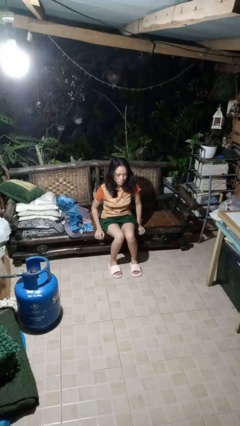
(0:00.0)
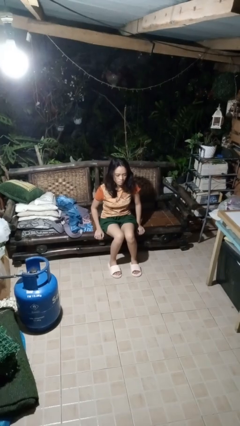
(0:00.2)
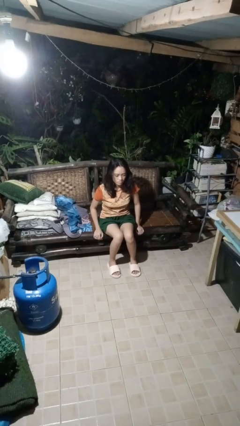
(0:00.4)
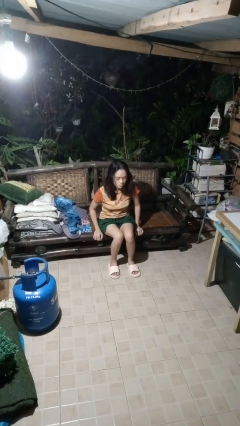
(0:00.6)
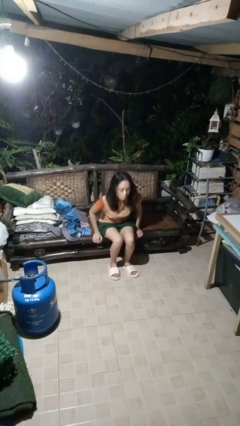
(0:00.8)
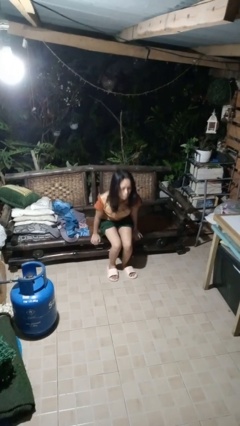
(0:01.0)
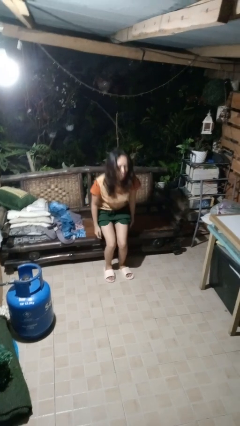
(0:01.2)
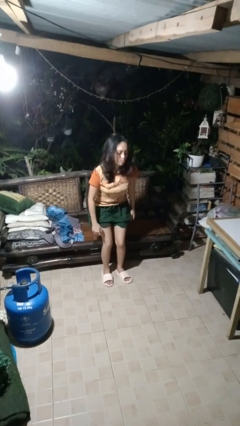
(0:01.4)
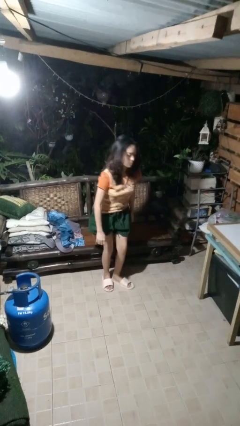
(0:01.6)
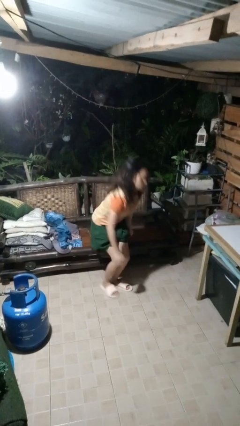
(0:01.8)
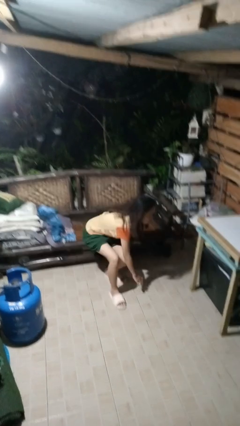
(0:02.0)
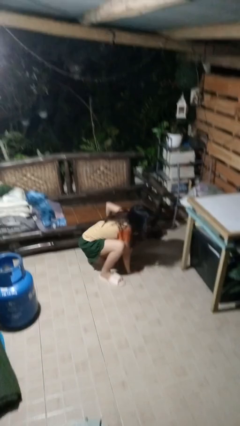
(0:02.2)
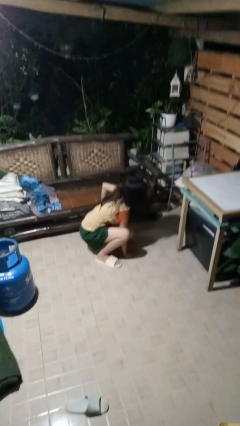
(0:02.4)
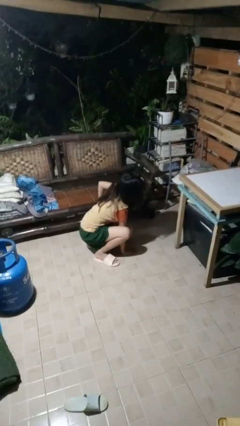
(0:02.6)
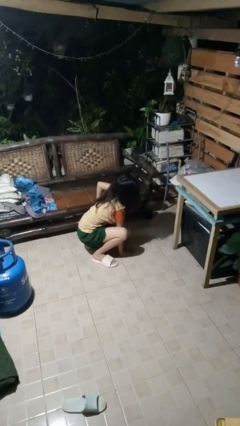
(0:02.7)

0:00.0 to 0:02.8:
person falls from chair

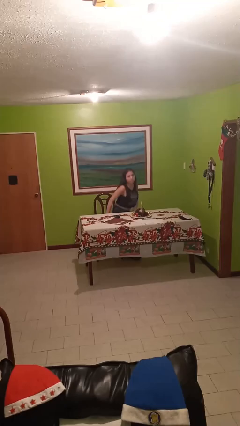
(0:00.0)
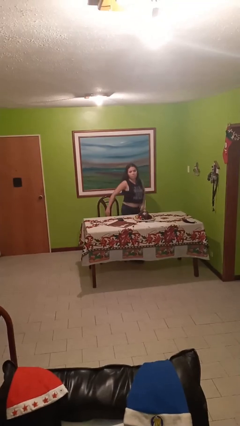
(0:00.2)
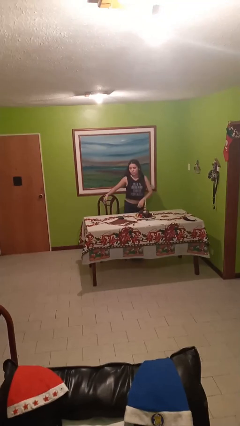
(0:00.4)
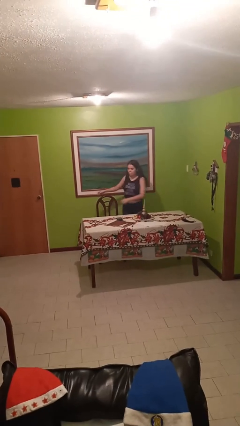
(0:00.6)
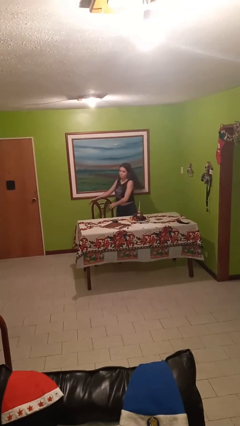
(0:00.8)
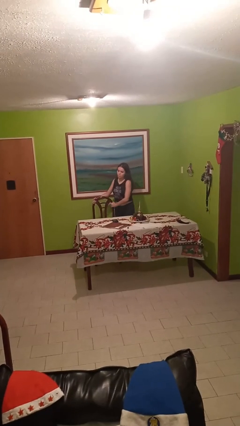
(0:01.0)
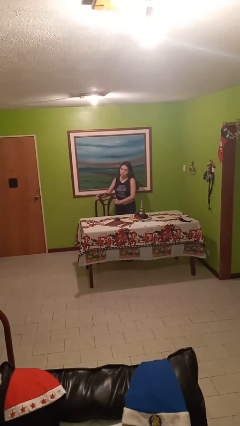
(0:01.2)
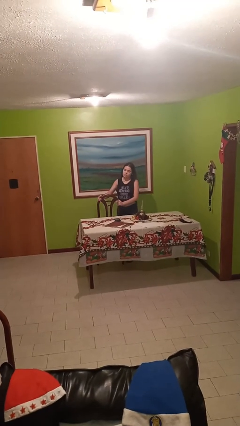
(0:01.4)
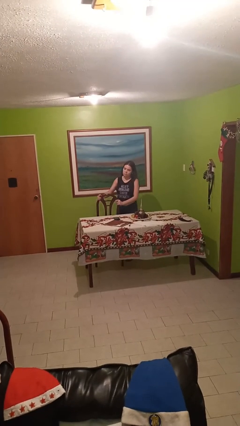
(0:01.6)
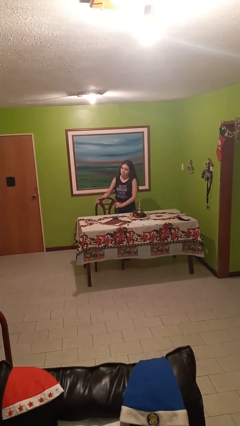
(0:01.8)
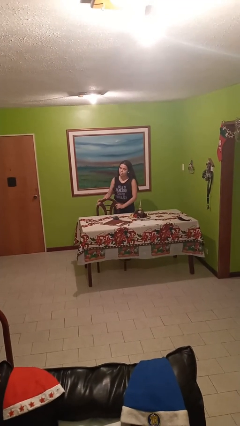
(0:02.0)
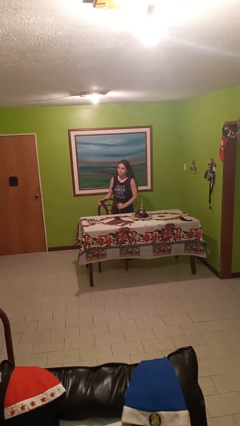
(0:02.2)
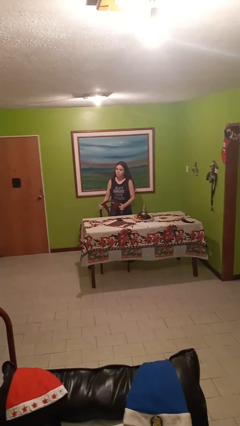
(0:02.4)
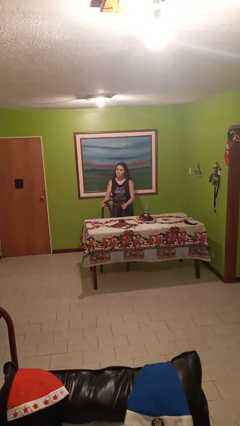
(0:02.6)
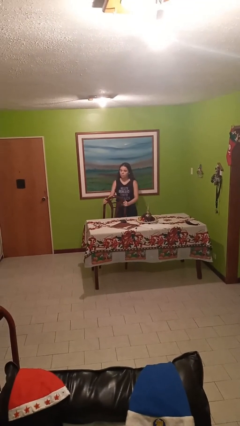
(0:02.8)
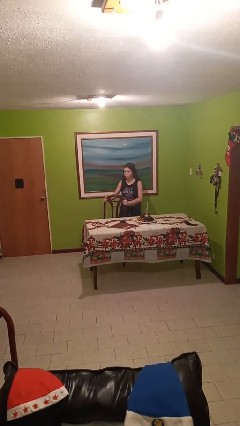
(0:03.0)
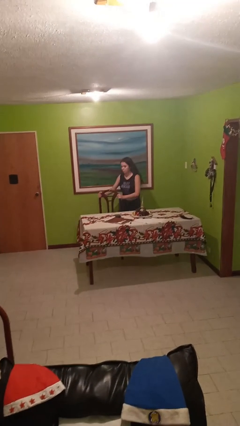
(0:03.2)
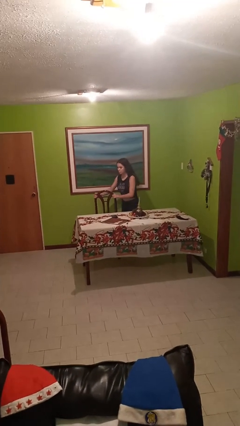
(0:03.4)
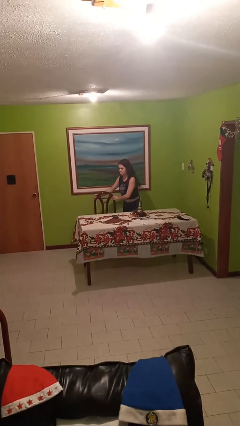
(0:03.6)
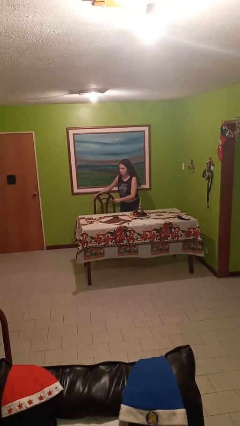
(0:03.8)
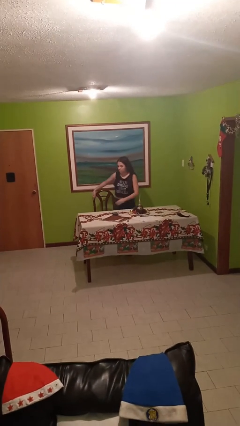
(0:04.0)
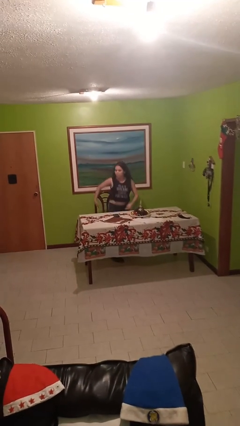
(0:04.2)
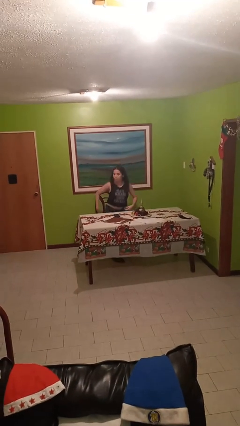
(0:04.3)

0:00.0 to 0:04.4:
person stands up

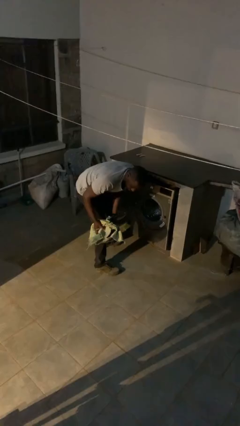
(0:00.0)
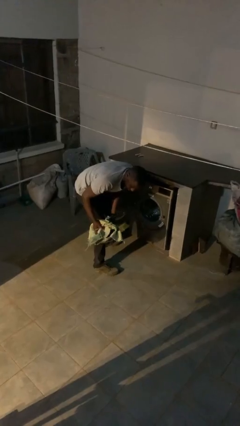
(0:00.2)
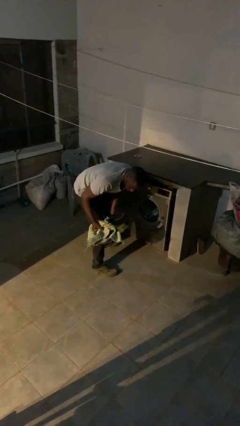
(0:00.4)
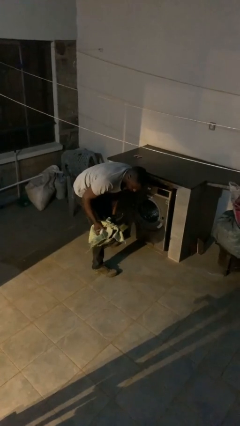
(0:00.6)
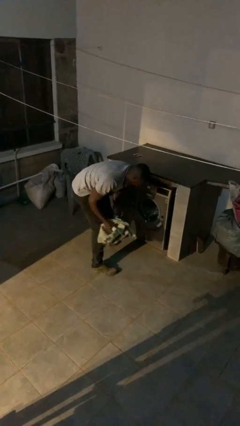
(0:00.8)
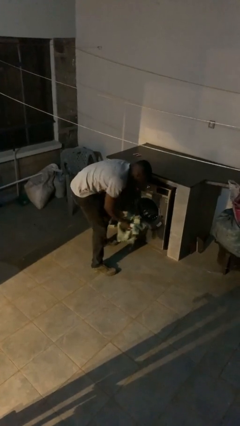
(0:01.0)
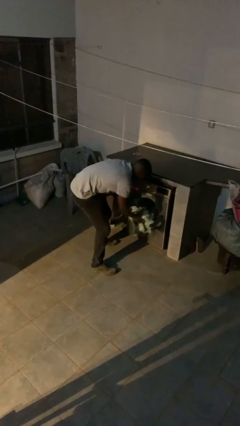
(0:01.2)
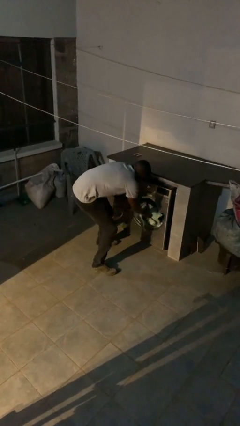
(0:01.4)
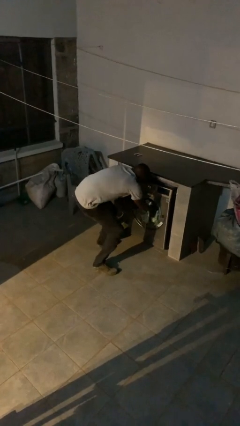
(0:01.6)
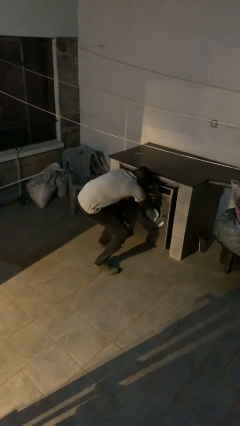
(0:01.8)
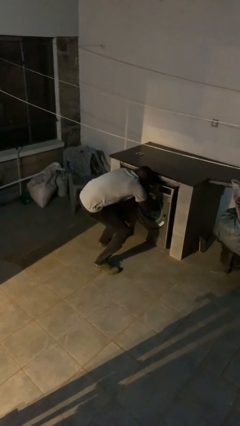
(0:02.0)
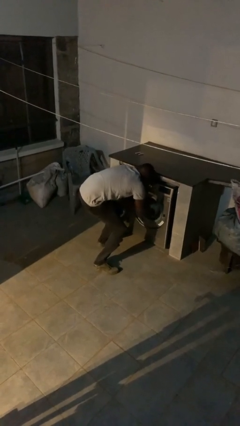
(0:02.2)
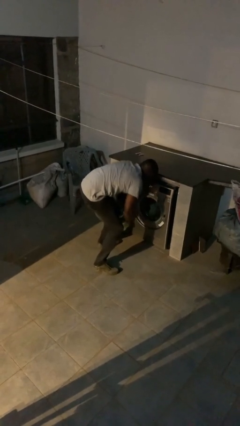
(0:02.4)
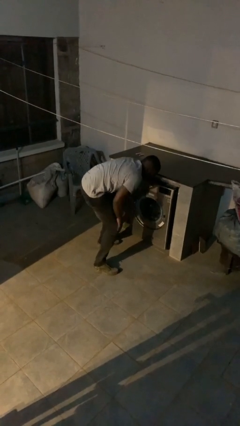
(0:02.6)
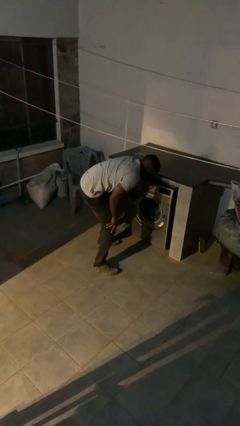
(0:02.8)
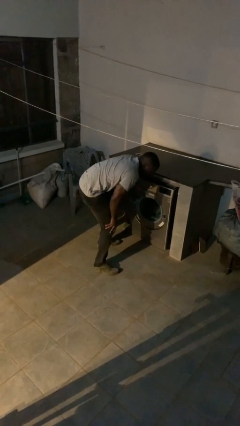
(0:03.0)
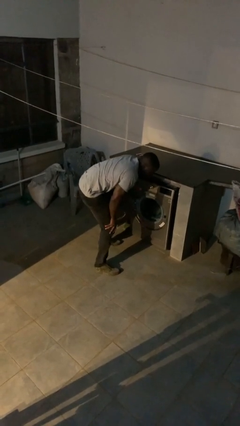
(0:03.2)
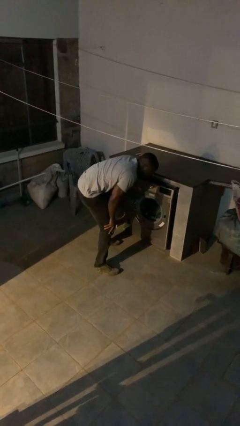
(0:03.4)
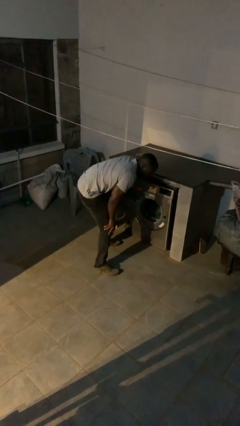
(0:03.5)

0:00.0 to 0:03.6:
person loads clotheswasher

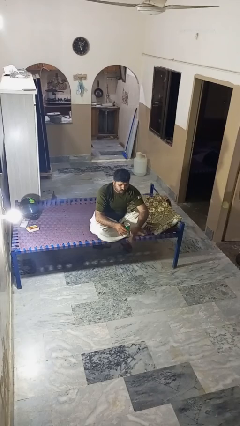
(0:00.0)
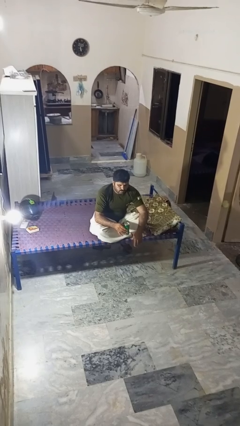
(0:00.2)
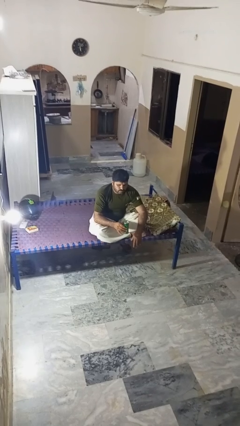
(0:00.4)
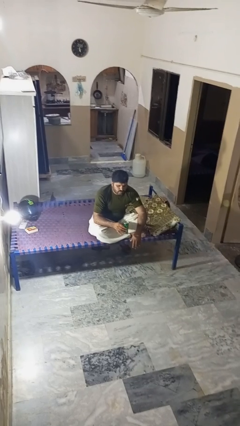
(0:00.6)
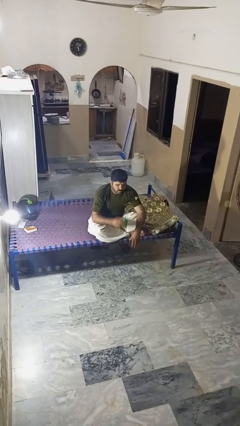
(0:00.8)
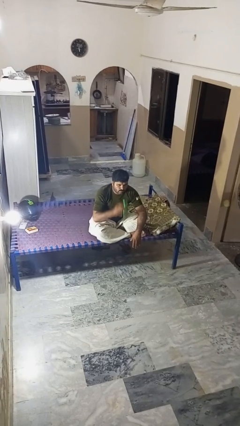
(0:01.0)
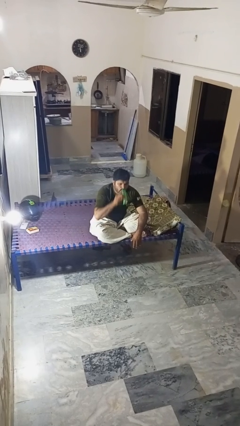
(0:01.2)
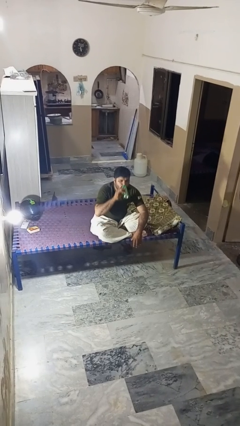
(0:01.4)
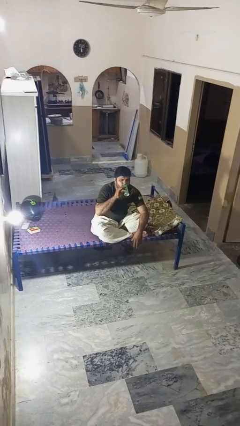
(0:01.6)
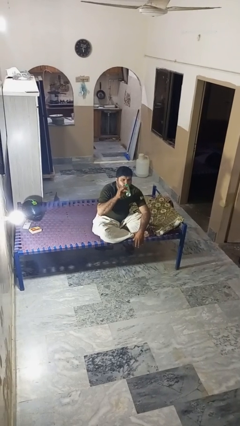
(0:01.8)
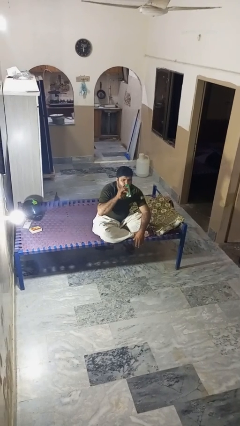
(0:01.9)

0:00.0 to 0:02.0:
person drinks from beverage can

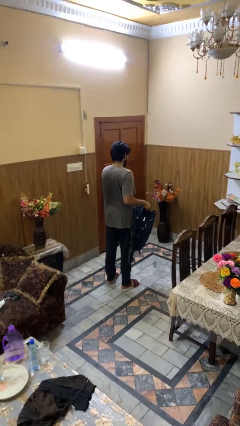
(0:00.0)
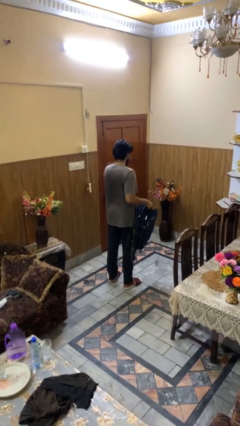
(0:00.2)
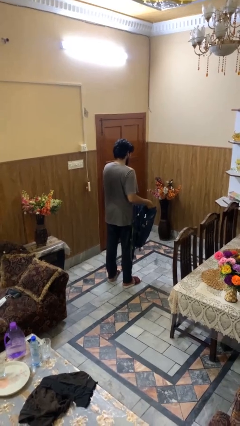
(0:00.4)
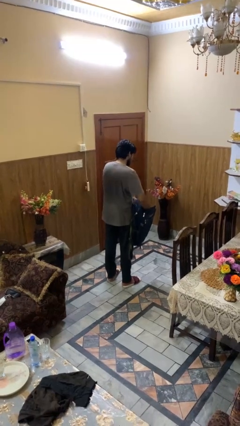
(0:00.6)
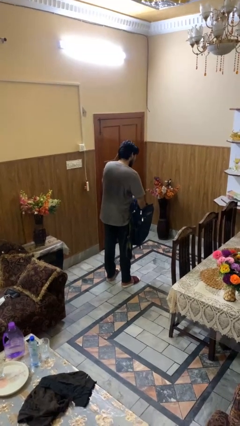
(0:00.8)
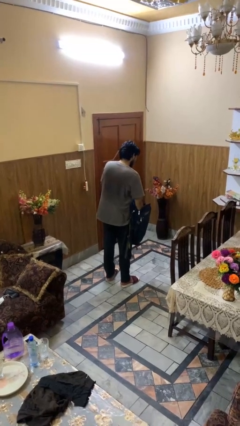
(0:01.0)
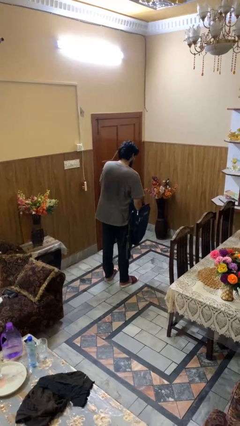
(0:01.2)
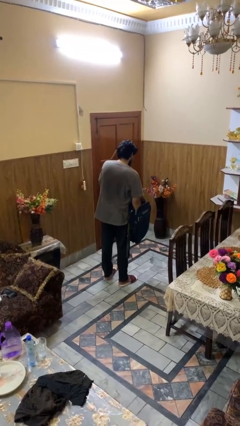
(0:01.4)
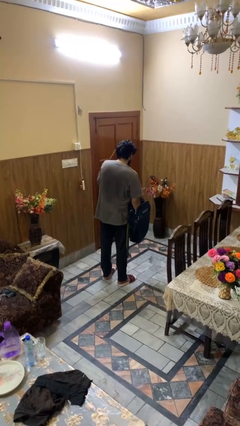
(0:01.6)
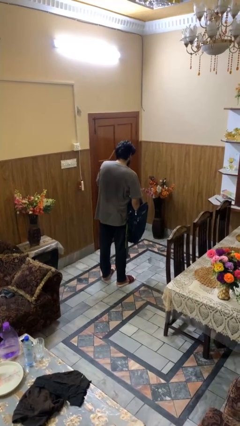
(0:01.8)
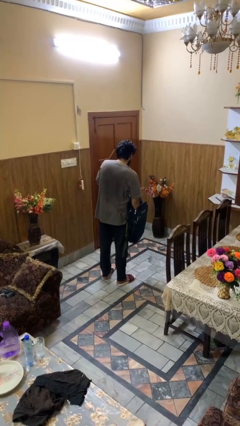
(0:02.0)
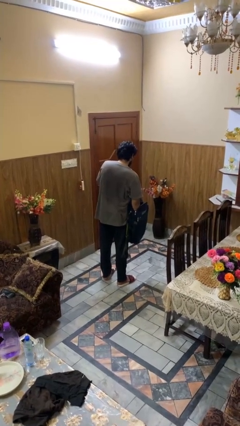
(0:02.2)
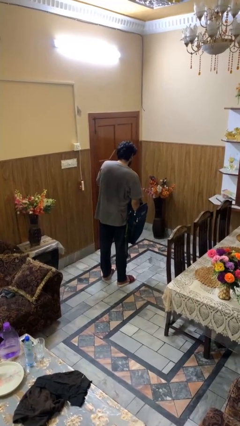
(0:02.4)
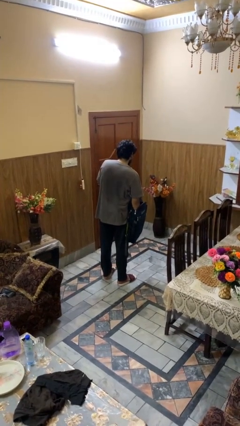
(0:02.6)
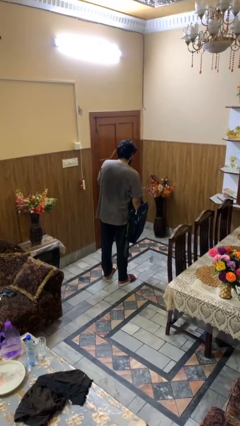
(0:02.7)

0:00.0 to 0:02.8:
person searches in backpack

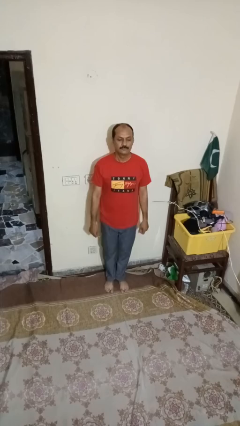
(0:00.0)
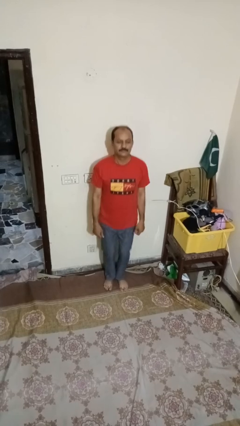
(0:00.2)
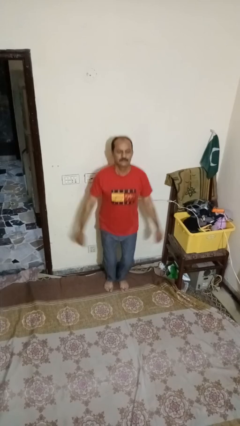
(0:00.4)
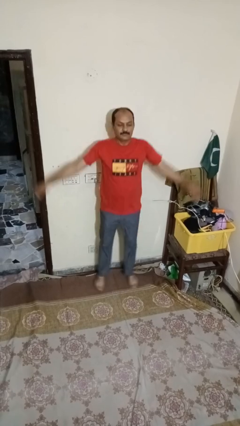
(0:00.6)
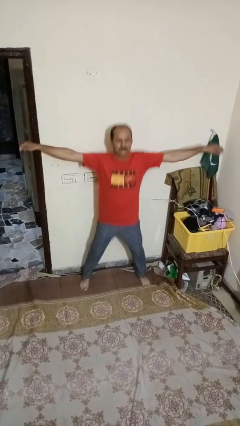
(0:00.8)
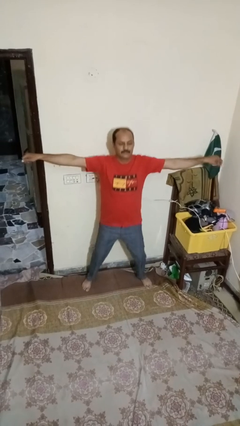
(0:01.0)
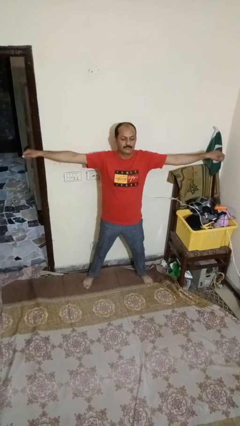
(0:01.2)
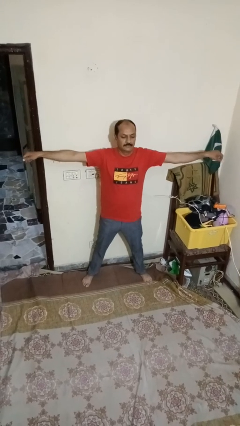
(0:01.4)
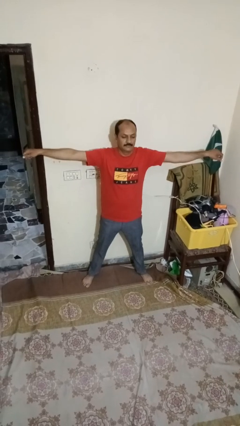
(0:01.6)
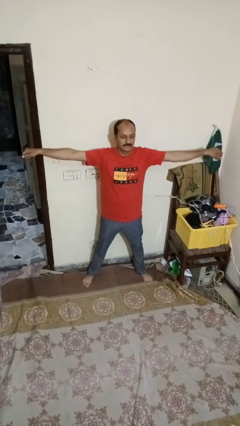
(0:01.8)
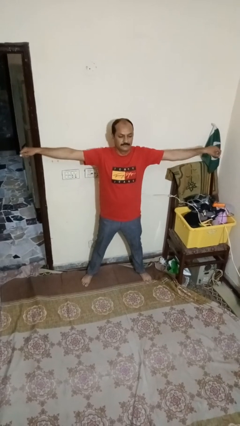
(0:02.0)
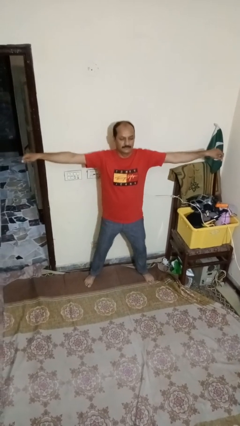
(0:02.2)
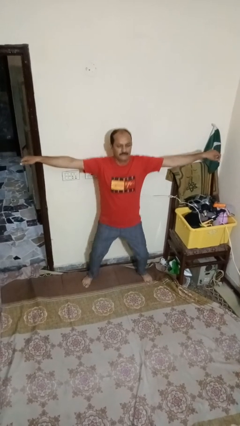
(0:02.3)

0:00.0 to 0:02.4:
person exercises with jumping jacks
